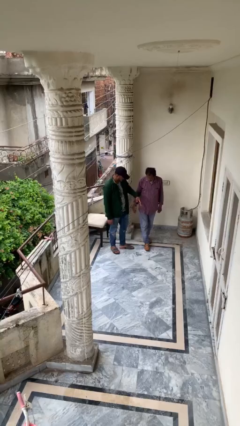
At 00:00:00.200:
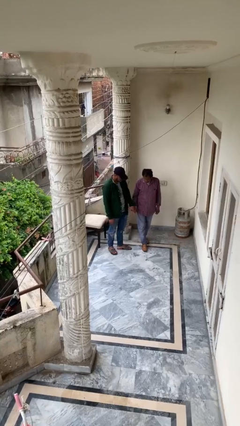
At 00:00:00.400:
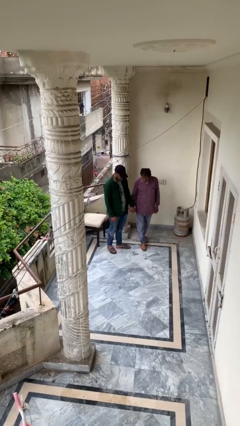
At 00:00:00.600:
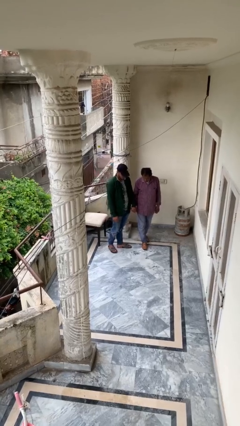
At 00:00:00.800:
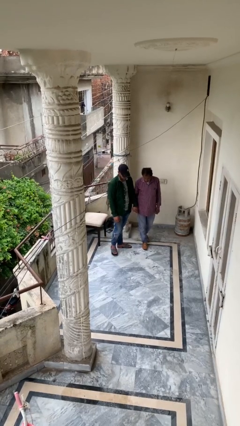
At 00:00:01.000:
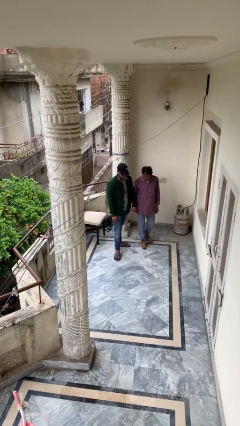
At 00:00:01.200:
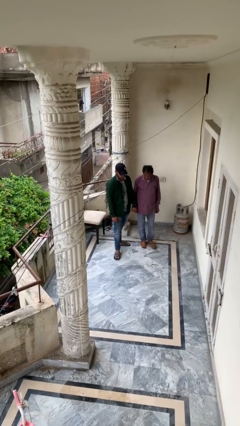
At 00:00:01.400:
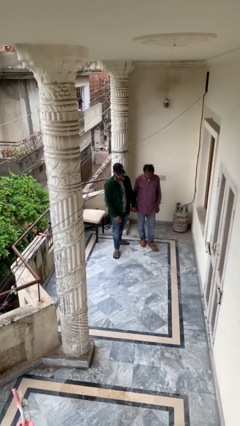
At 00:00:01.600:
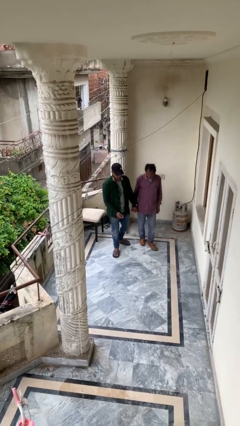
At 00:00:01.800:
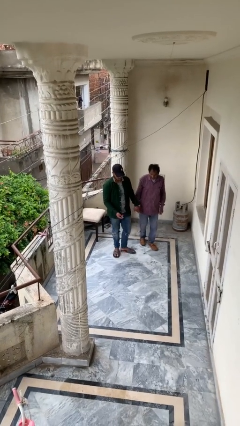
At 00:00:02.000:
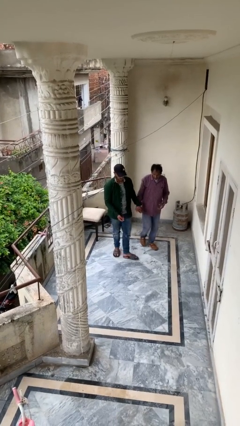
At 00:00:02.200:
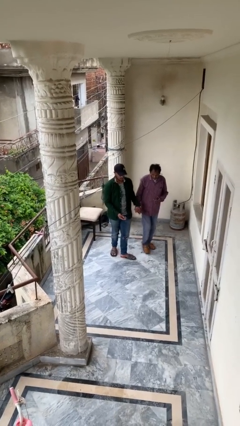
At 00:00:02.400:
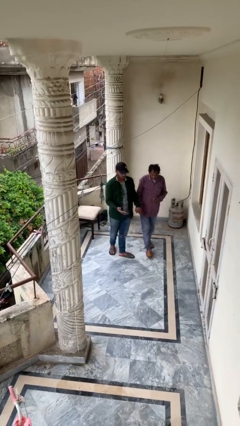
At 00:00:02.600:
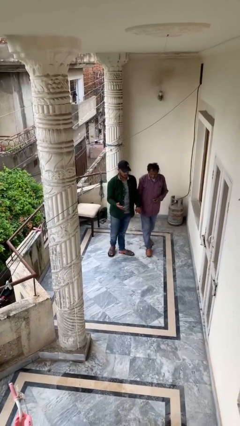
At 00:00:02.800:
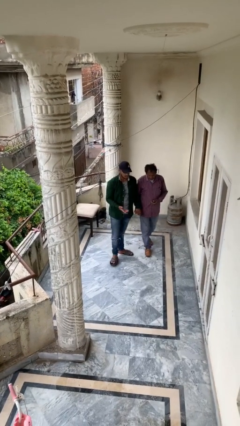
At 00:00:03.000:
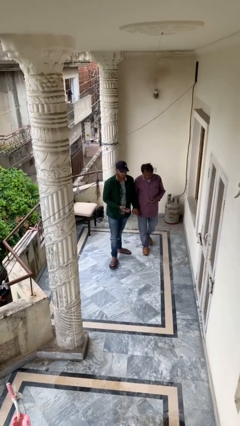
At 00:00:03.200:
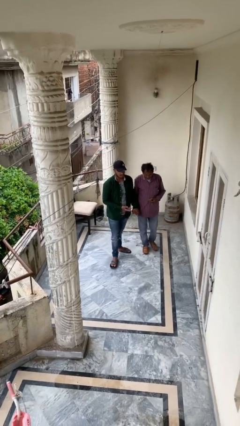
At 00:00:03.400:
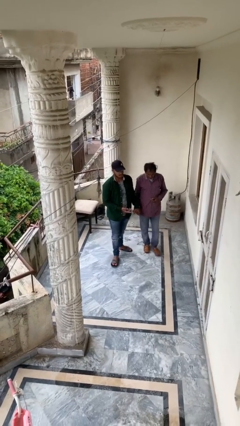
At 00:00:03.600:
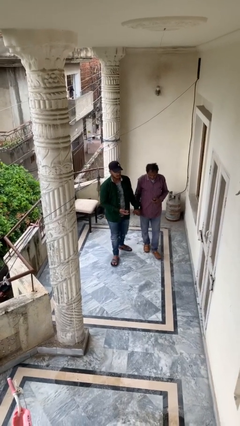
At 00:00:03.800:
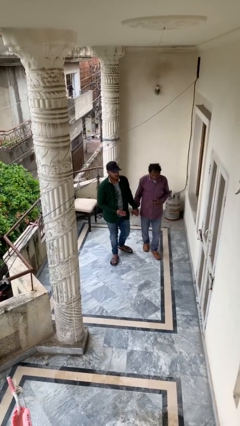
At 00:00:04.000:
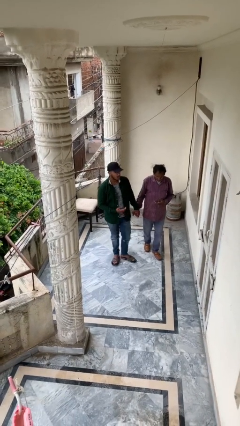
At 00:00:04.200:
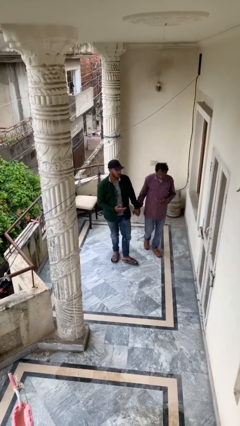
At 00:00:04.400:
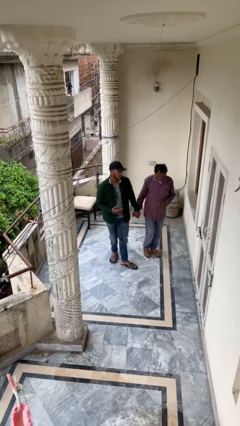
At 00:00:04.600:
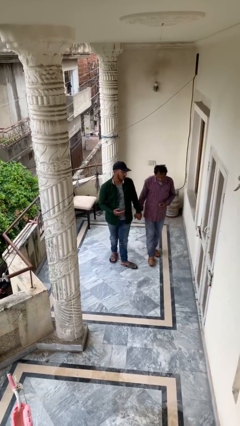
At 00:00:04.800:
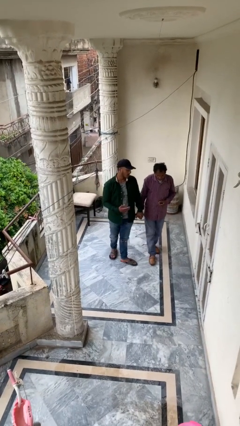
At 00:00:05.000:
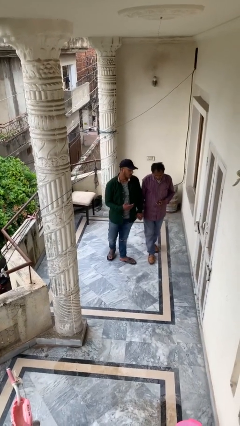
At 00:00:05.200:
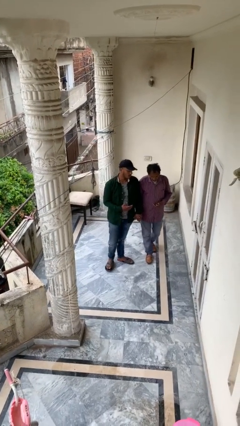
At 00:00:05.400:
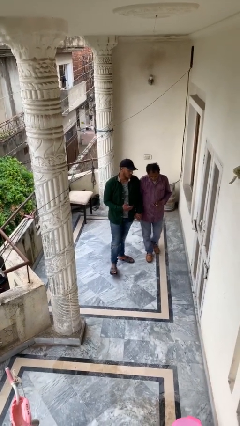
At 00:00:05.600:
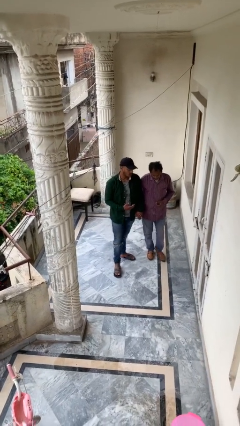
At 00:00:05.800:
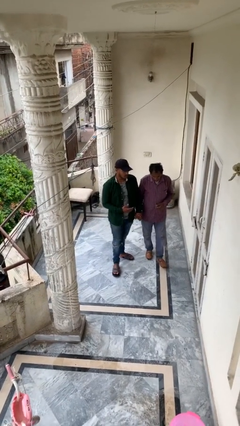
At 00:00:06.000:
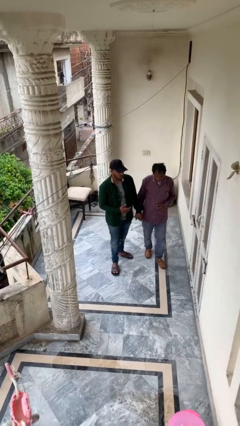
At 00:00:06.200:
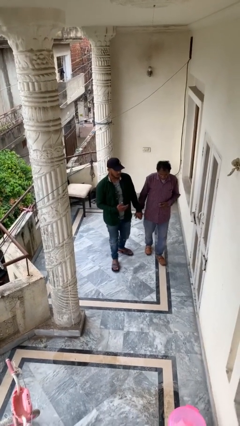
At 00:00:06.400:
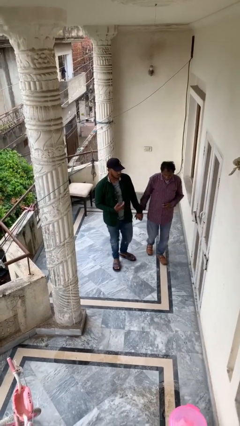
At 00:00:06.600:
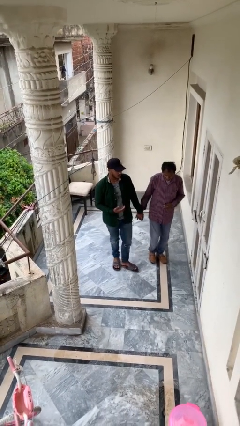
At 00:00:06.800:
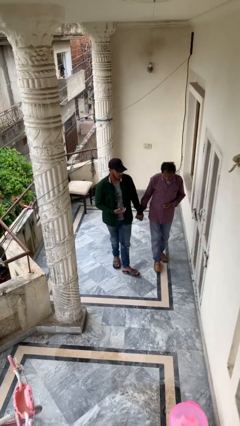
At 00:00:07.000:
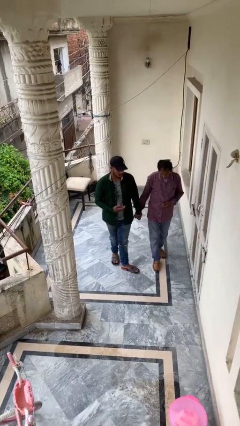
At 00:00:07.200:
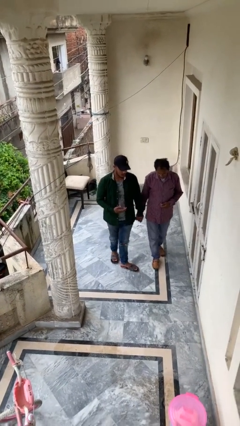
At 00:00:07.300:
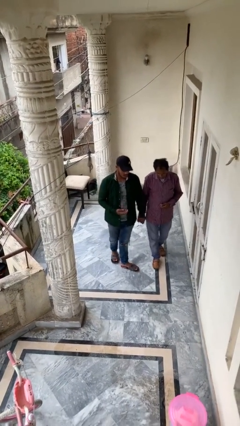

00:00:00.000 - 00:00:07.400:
person holds hand

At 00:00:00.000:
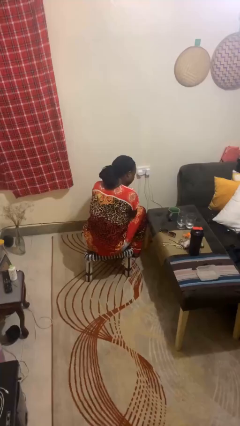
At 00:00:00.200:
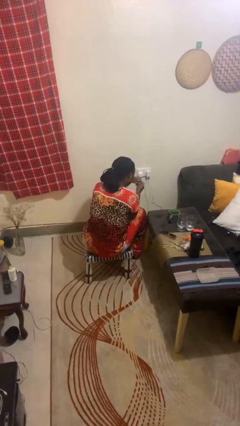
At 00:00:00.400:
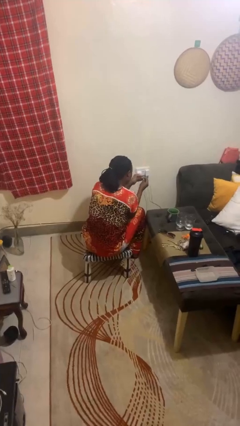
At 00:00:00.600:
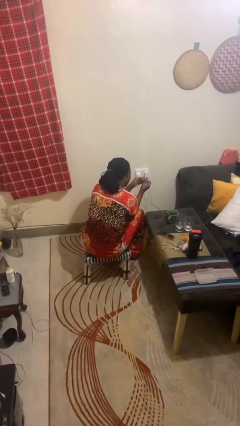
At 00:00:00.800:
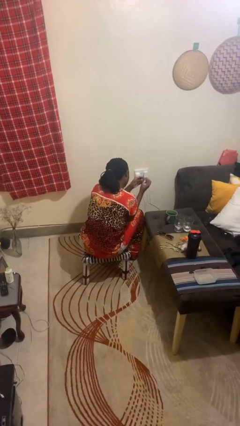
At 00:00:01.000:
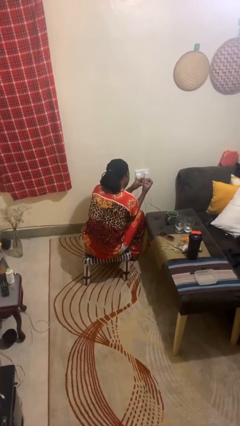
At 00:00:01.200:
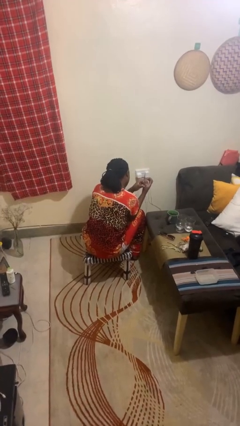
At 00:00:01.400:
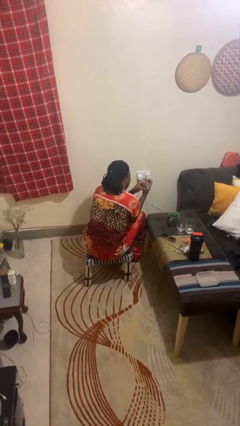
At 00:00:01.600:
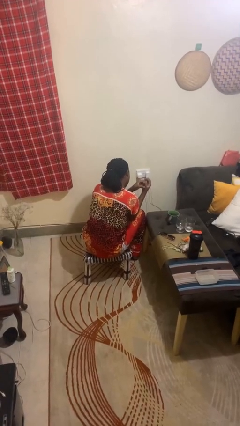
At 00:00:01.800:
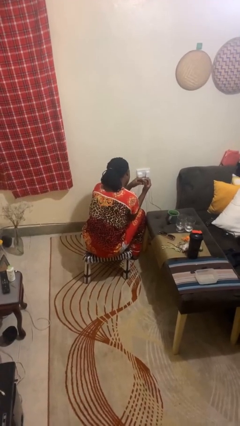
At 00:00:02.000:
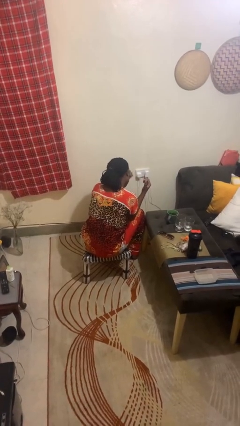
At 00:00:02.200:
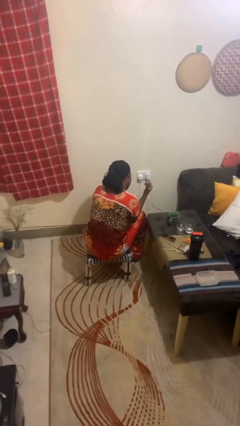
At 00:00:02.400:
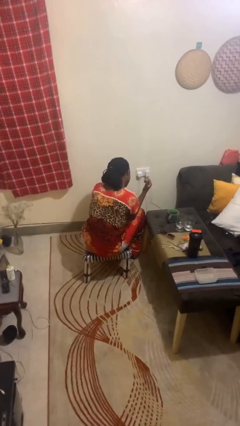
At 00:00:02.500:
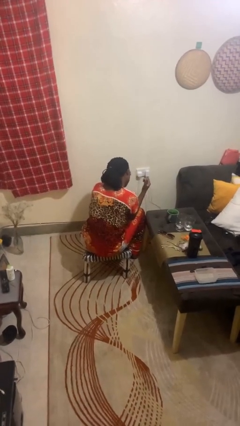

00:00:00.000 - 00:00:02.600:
person puts on ring

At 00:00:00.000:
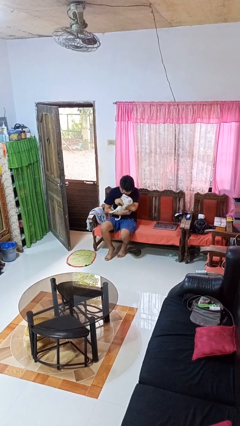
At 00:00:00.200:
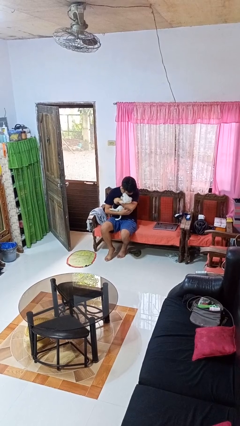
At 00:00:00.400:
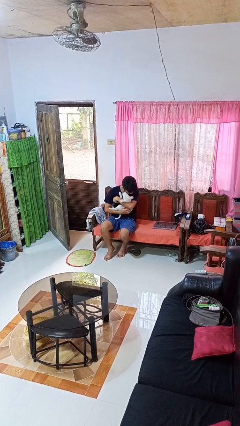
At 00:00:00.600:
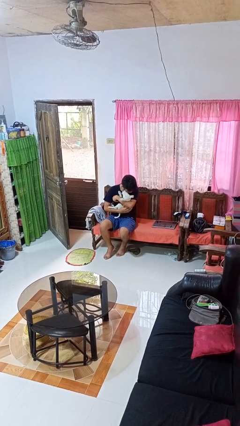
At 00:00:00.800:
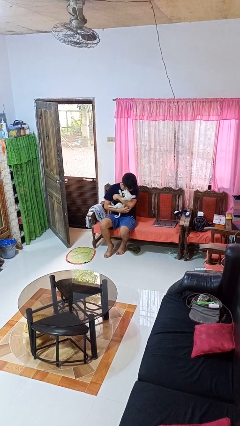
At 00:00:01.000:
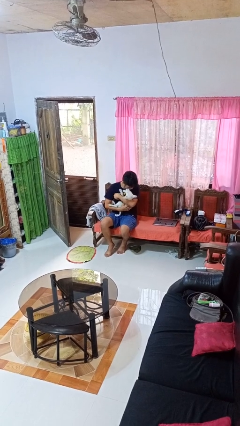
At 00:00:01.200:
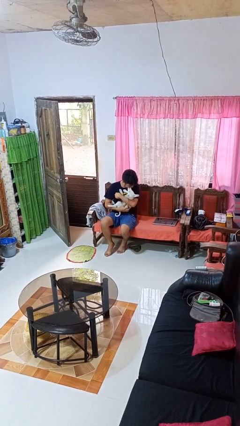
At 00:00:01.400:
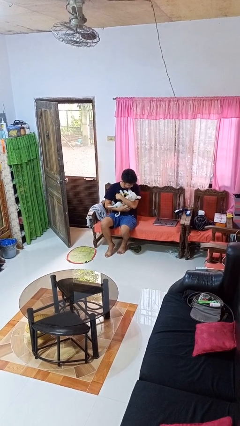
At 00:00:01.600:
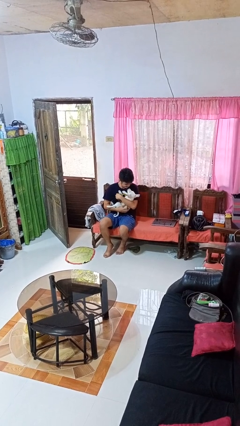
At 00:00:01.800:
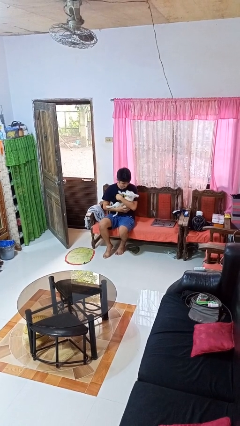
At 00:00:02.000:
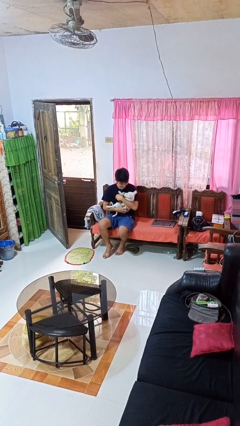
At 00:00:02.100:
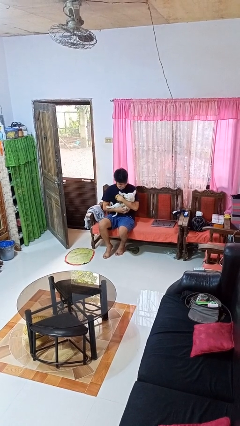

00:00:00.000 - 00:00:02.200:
person hugs dog

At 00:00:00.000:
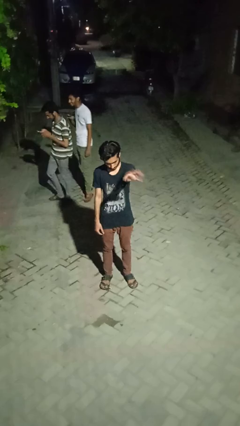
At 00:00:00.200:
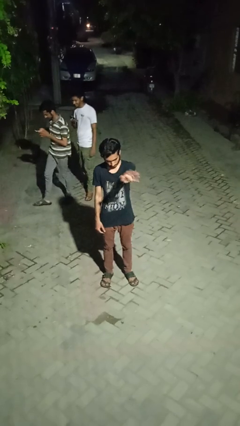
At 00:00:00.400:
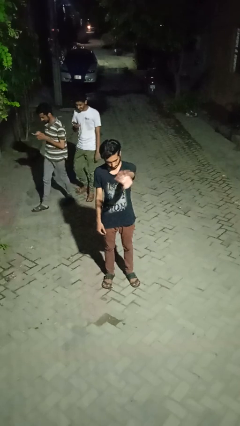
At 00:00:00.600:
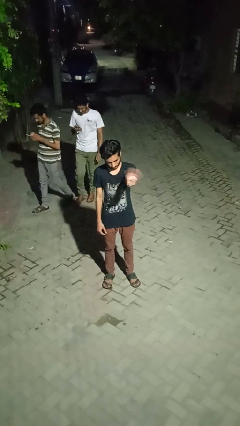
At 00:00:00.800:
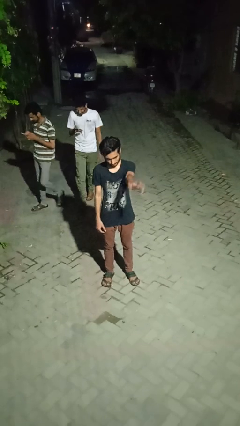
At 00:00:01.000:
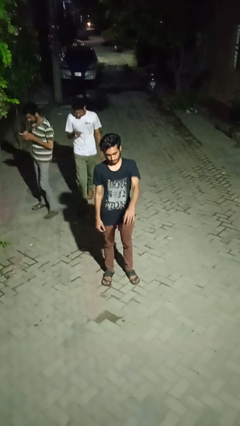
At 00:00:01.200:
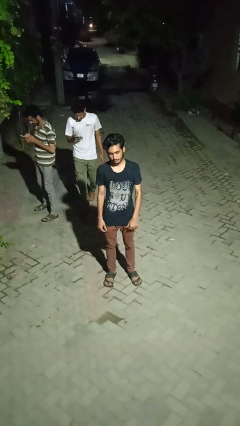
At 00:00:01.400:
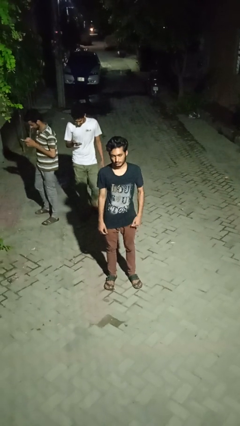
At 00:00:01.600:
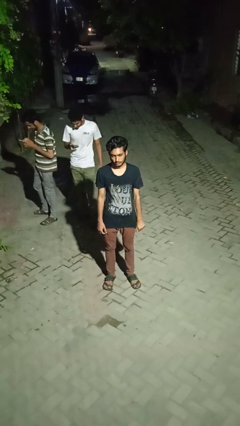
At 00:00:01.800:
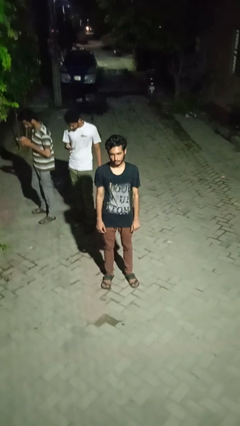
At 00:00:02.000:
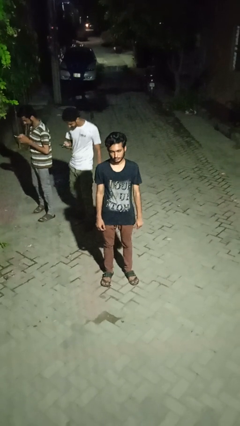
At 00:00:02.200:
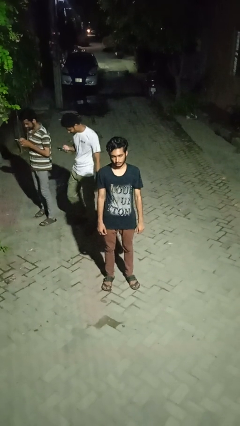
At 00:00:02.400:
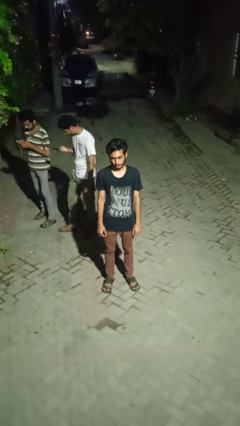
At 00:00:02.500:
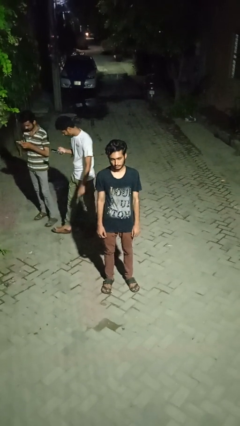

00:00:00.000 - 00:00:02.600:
person waves at person

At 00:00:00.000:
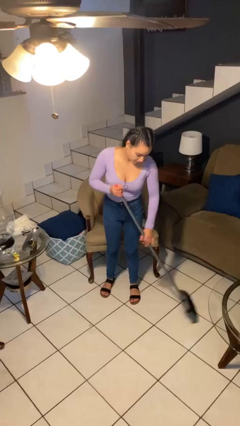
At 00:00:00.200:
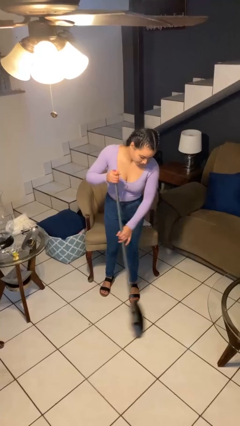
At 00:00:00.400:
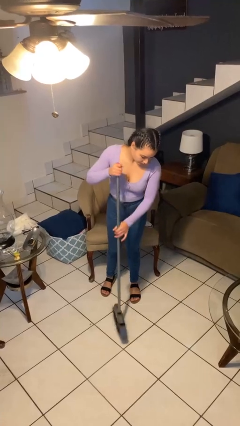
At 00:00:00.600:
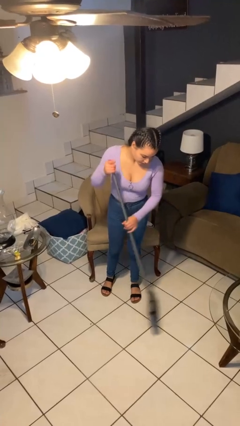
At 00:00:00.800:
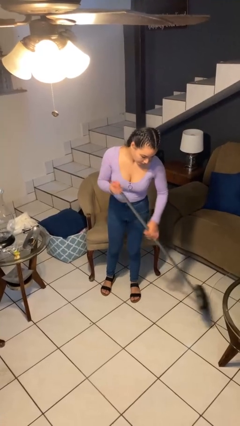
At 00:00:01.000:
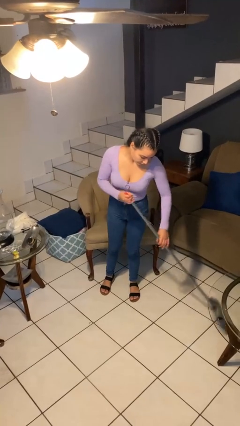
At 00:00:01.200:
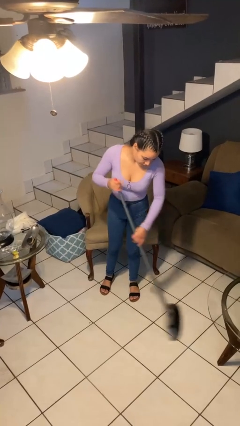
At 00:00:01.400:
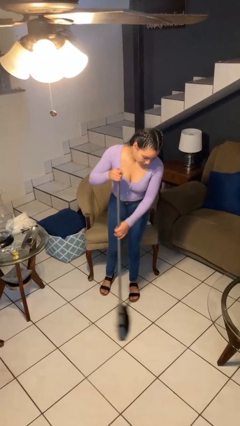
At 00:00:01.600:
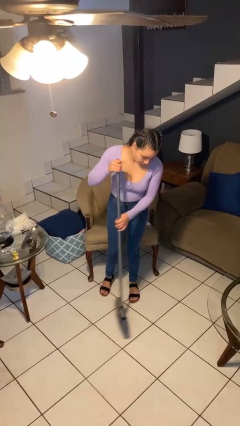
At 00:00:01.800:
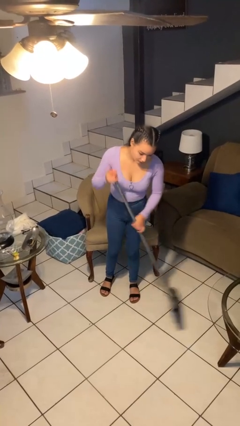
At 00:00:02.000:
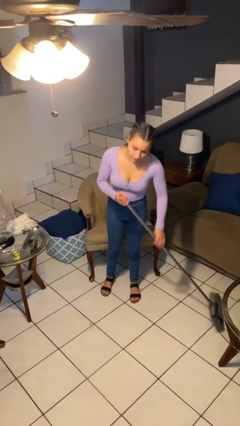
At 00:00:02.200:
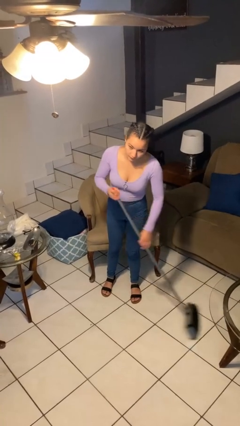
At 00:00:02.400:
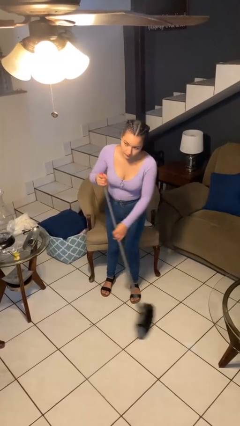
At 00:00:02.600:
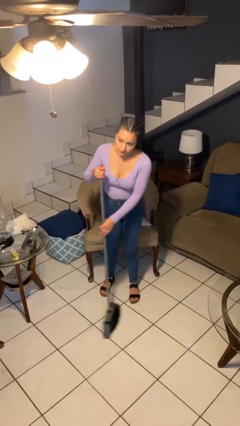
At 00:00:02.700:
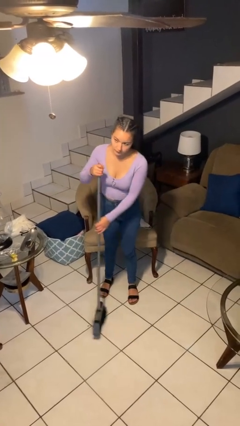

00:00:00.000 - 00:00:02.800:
person sweeps floor
